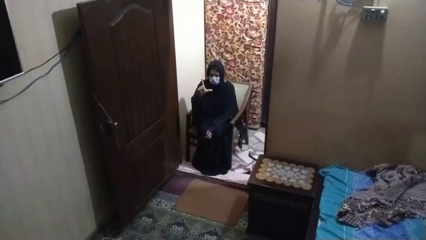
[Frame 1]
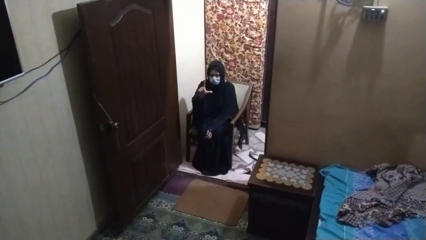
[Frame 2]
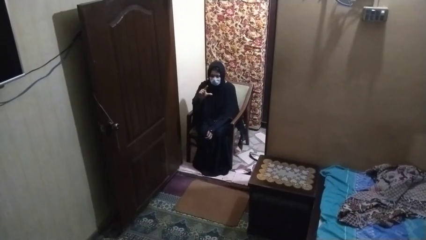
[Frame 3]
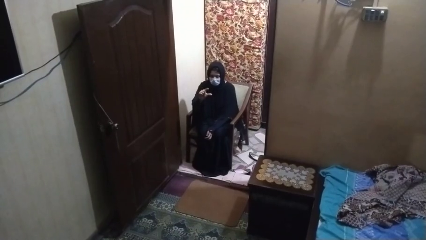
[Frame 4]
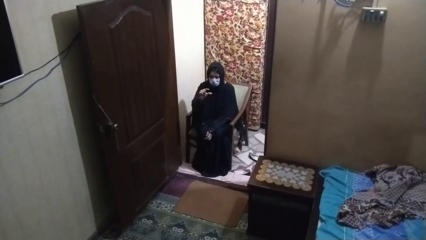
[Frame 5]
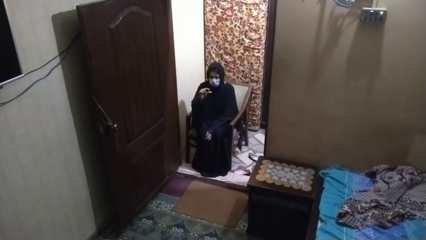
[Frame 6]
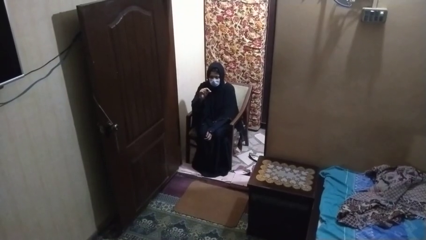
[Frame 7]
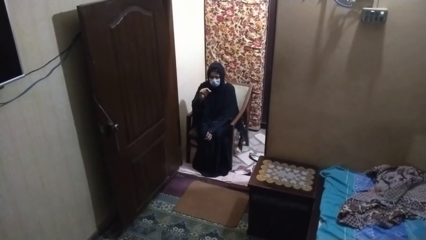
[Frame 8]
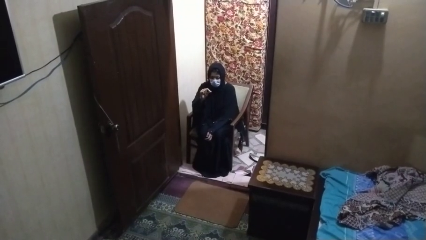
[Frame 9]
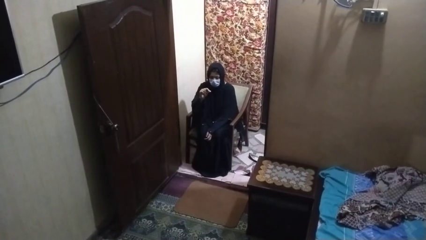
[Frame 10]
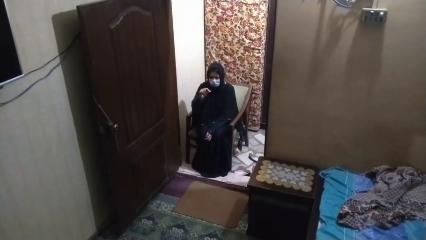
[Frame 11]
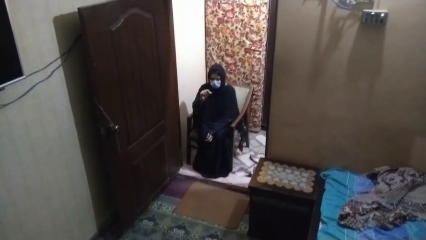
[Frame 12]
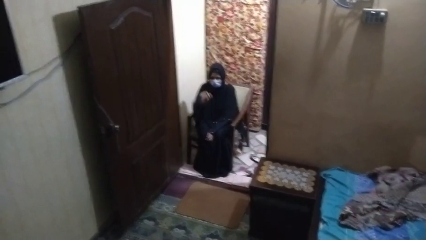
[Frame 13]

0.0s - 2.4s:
person gestures zoom out

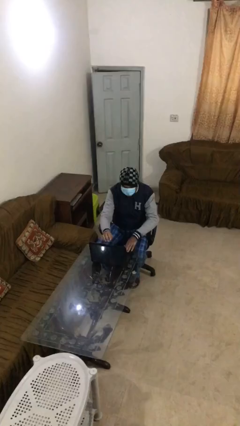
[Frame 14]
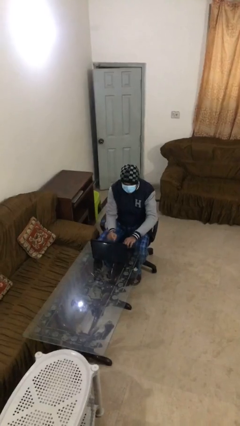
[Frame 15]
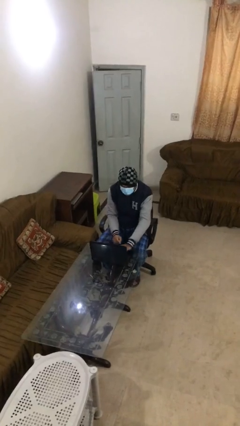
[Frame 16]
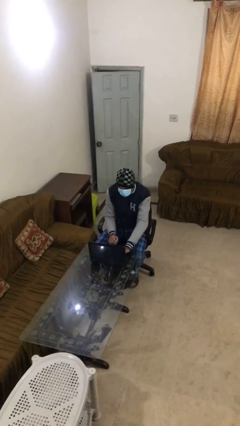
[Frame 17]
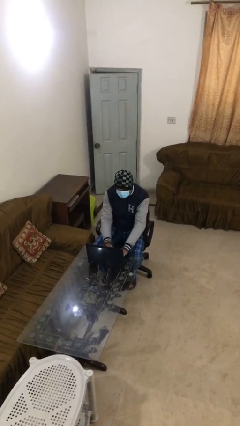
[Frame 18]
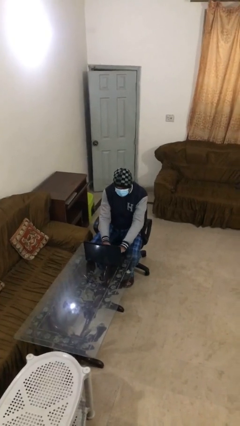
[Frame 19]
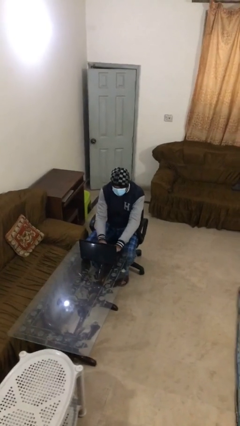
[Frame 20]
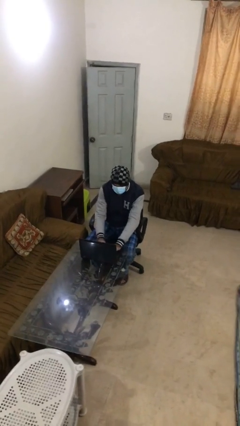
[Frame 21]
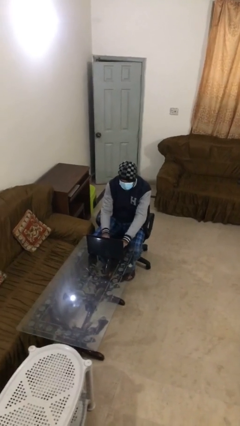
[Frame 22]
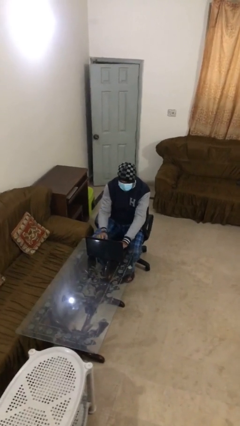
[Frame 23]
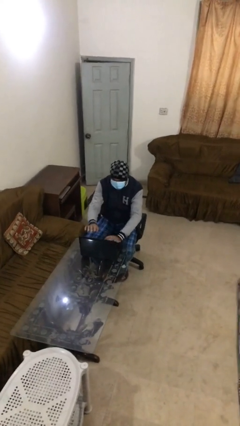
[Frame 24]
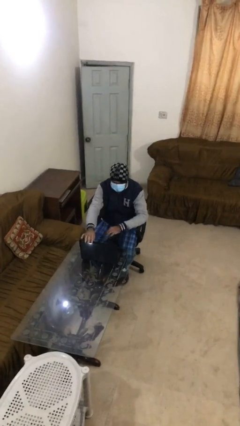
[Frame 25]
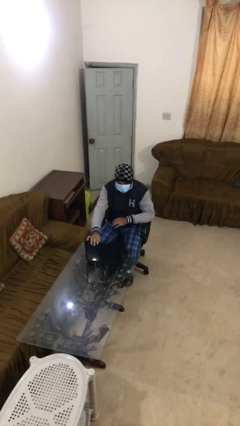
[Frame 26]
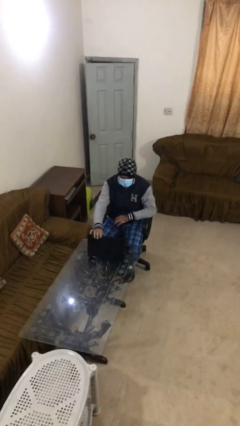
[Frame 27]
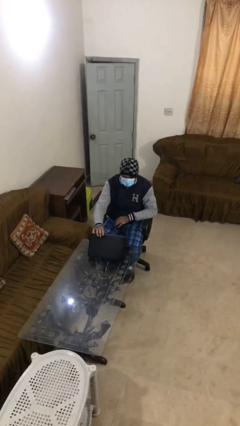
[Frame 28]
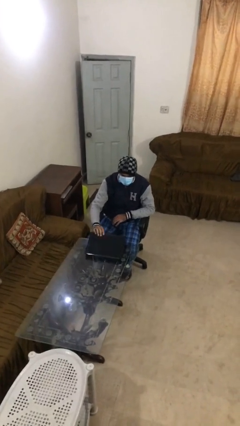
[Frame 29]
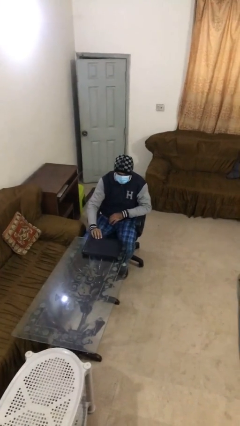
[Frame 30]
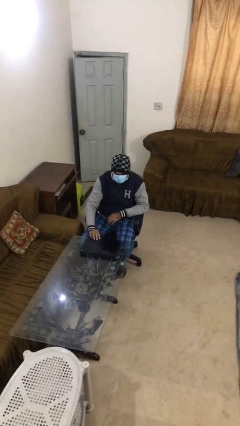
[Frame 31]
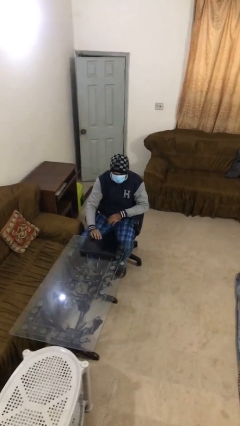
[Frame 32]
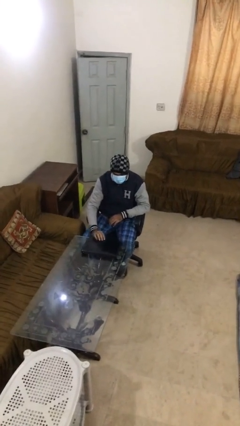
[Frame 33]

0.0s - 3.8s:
person interacts with laptop

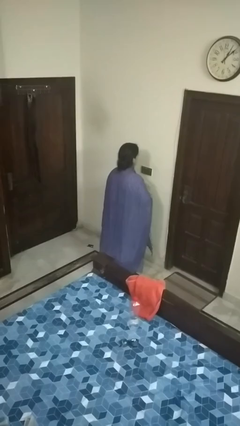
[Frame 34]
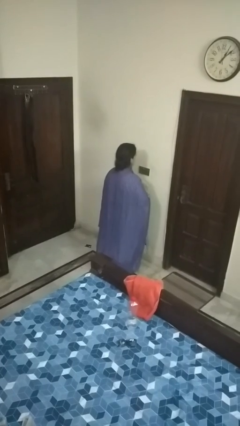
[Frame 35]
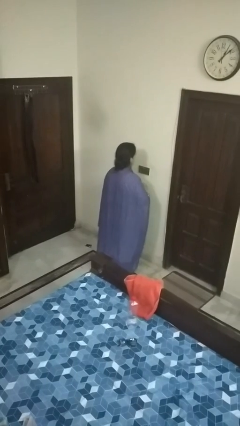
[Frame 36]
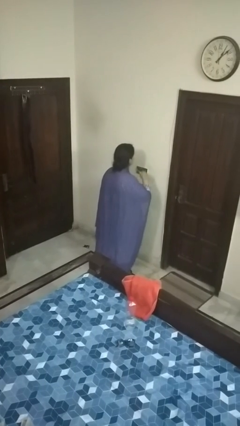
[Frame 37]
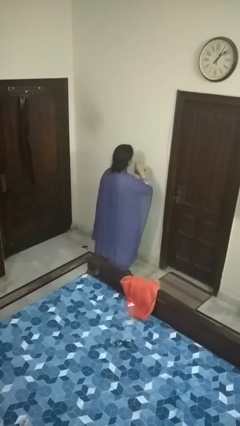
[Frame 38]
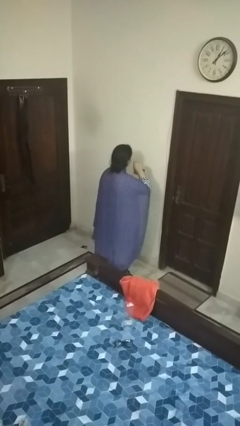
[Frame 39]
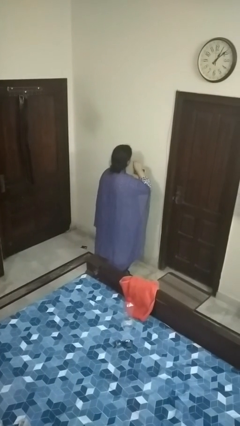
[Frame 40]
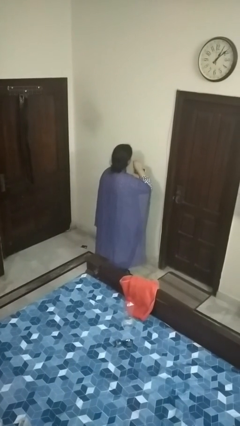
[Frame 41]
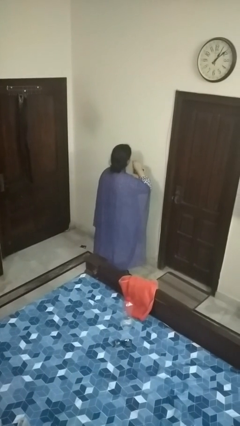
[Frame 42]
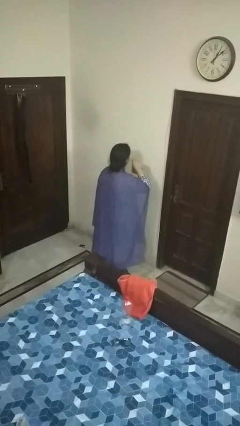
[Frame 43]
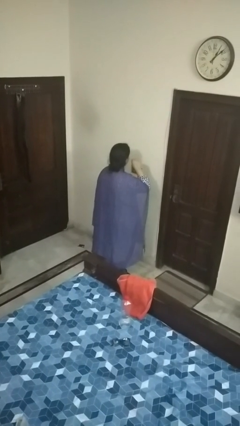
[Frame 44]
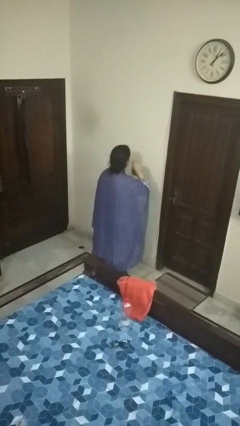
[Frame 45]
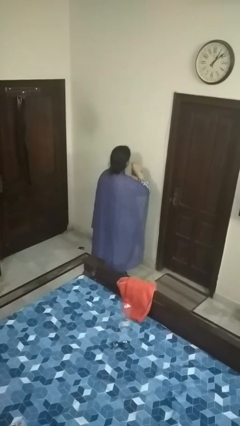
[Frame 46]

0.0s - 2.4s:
person brushes teeth

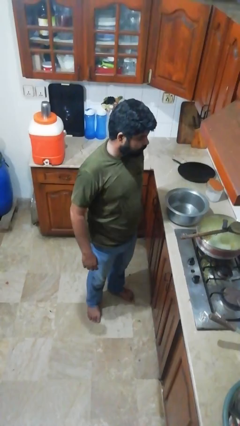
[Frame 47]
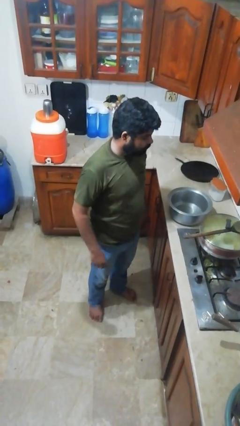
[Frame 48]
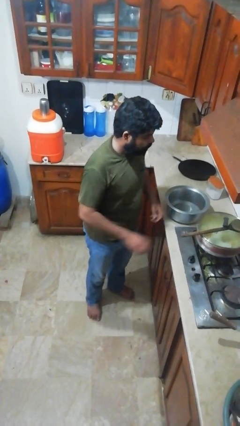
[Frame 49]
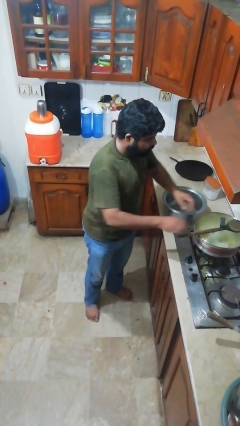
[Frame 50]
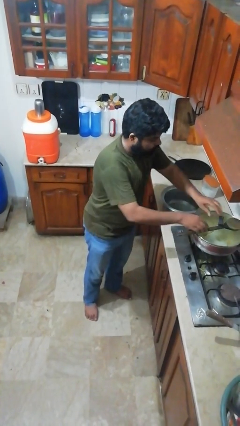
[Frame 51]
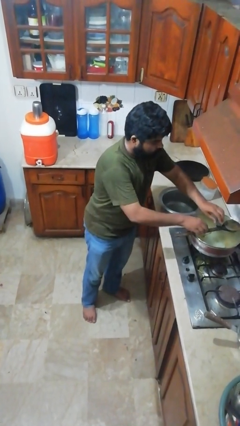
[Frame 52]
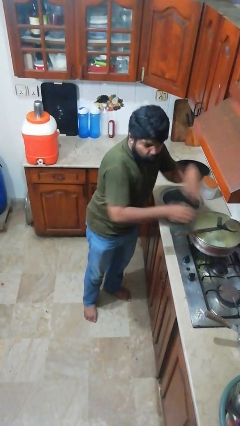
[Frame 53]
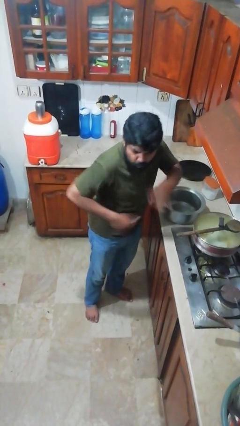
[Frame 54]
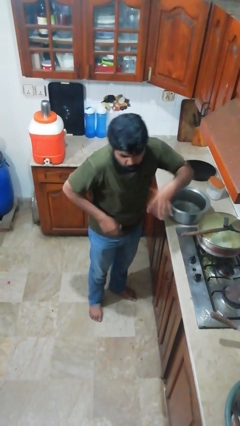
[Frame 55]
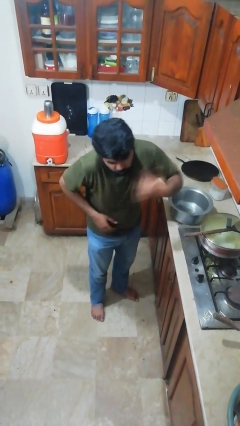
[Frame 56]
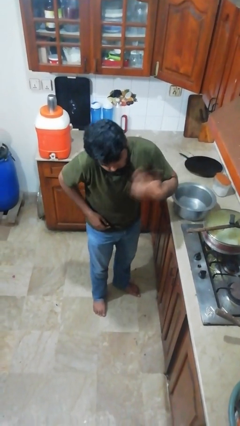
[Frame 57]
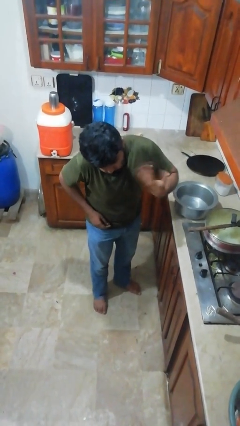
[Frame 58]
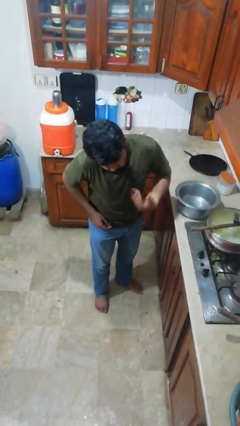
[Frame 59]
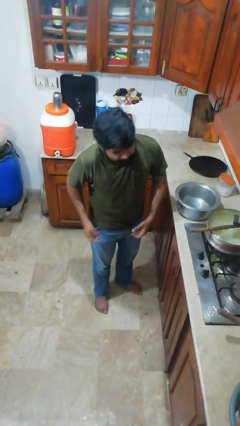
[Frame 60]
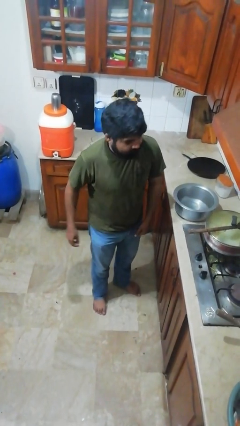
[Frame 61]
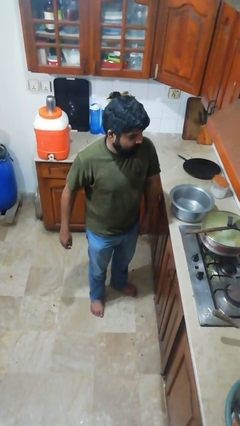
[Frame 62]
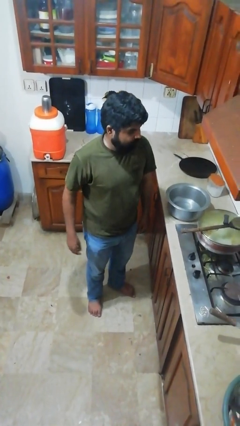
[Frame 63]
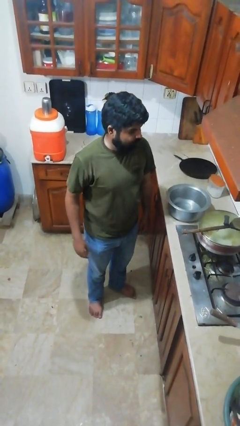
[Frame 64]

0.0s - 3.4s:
person burns hand

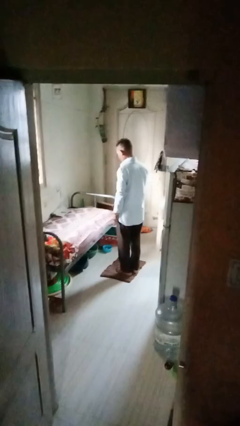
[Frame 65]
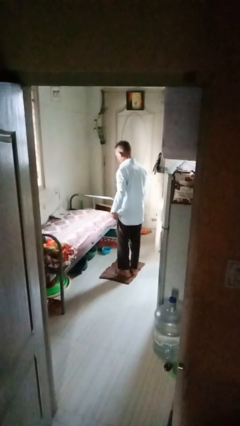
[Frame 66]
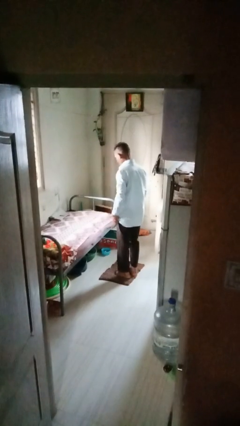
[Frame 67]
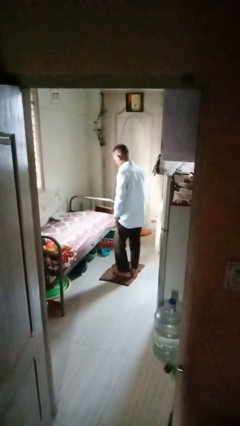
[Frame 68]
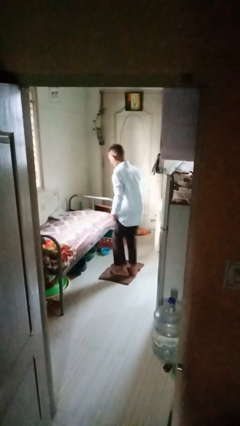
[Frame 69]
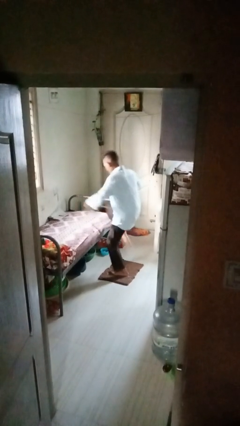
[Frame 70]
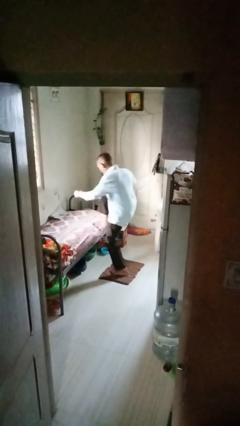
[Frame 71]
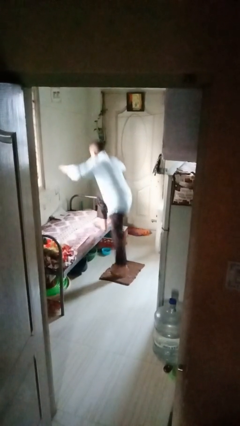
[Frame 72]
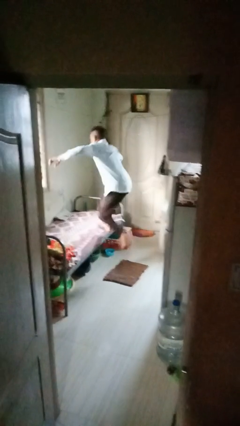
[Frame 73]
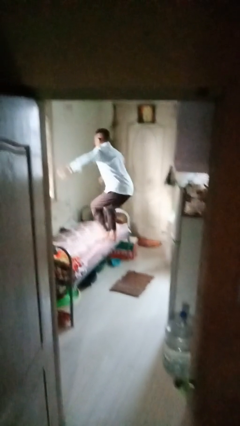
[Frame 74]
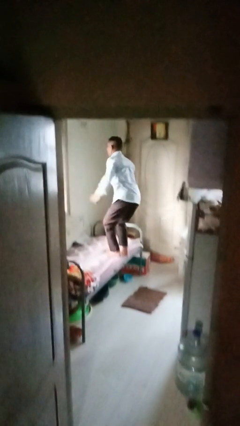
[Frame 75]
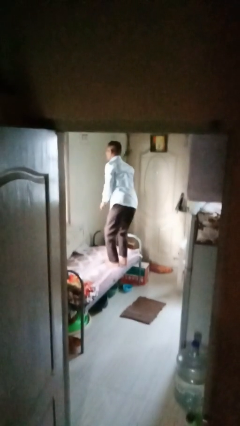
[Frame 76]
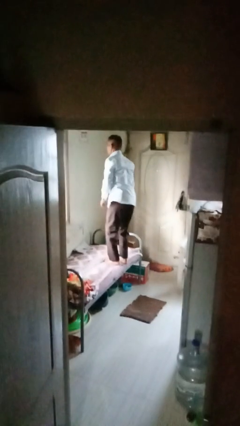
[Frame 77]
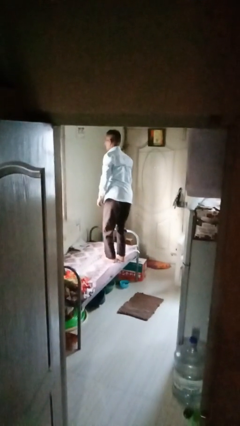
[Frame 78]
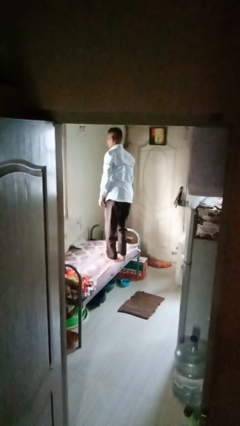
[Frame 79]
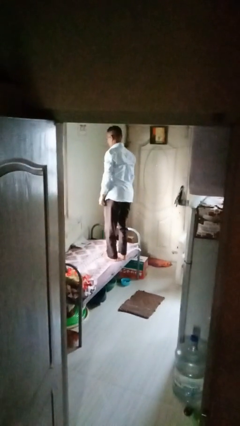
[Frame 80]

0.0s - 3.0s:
person jumps on bed

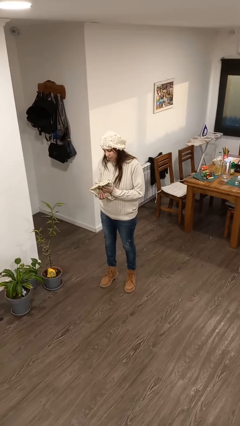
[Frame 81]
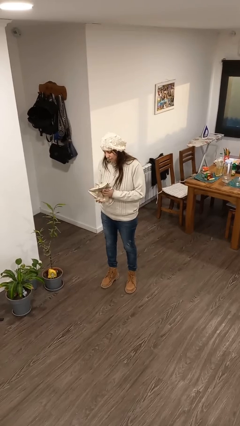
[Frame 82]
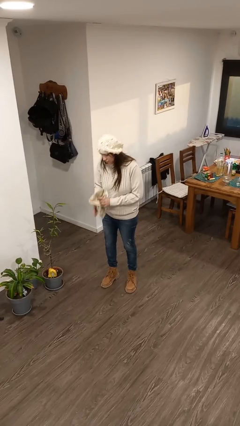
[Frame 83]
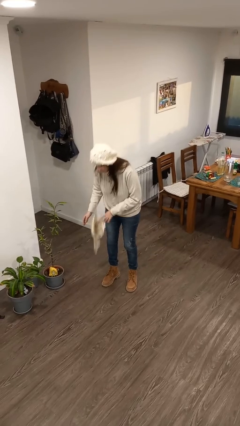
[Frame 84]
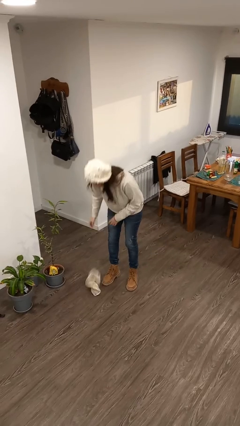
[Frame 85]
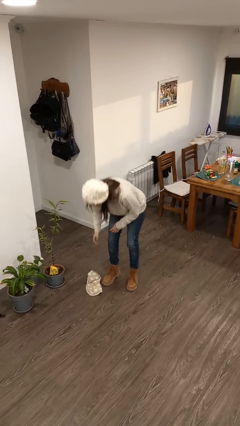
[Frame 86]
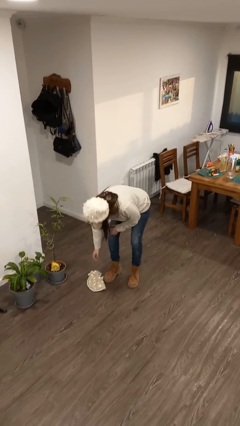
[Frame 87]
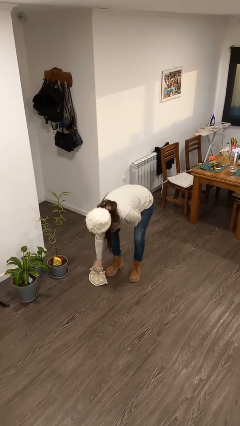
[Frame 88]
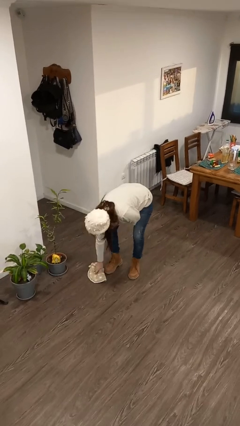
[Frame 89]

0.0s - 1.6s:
person drops object

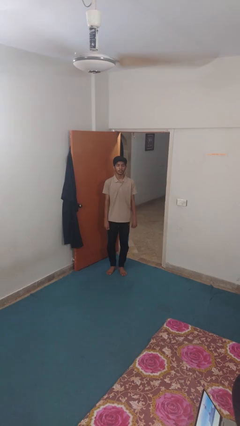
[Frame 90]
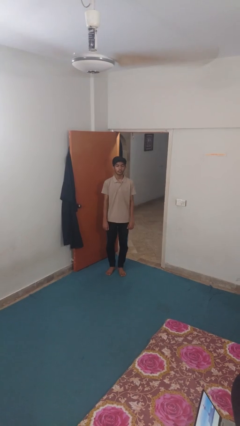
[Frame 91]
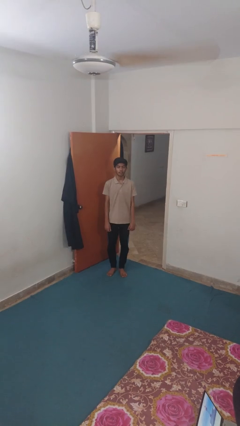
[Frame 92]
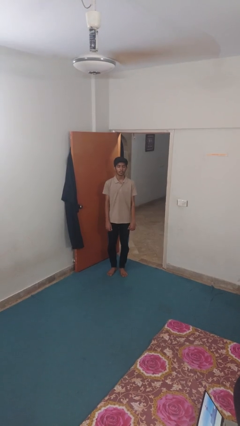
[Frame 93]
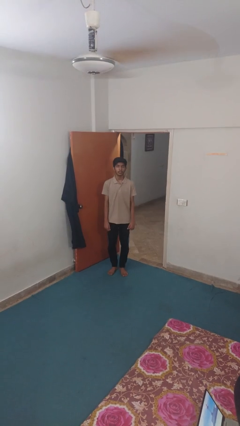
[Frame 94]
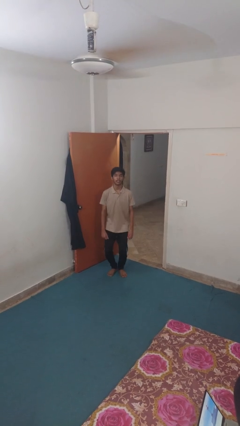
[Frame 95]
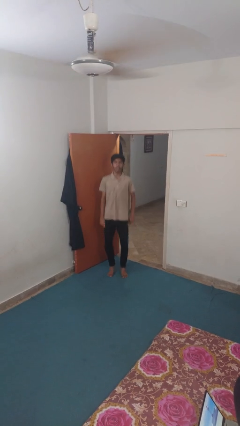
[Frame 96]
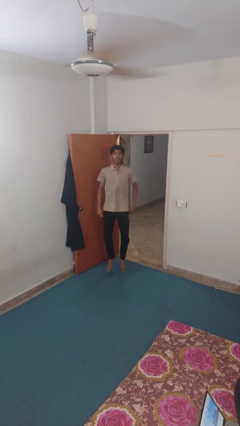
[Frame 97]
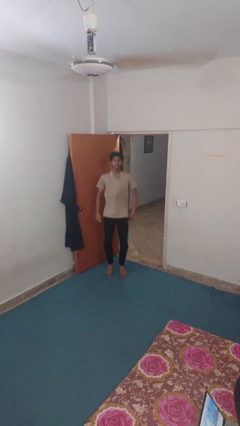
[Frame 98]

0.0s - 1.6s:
person jumps
